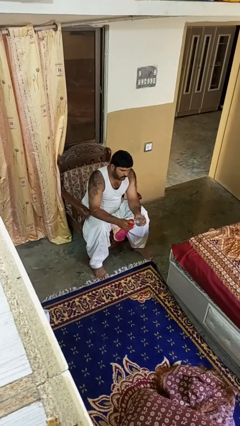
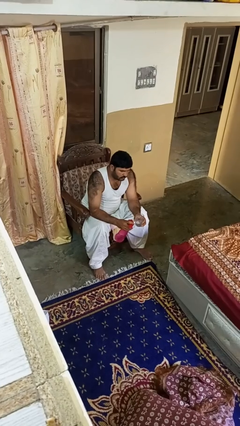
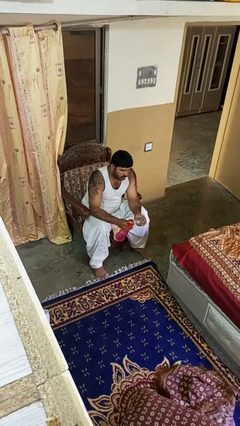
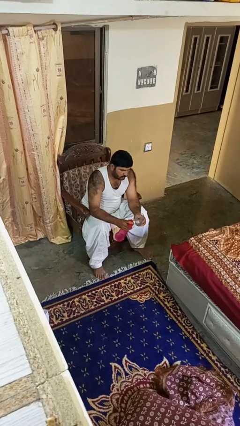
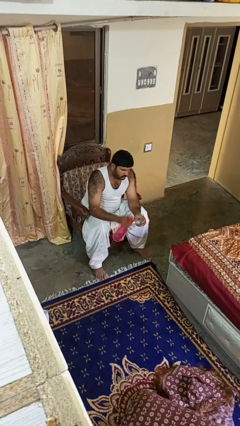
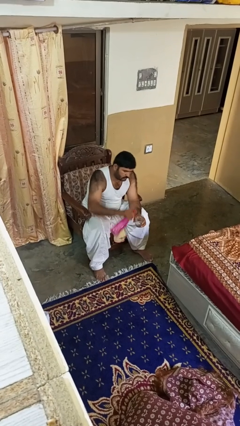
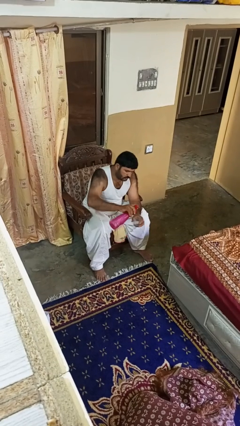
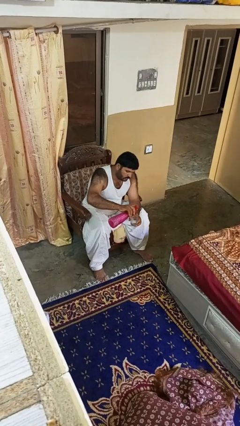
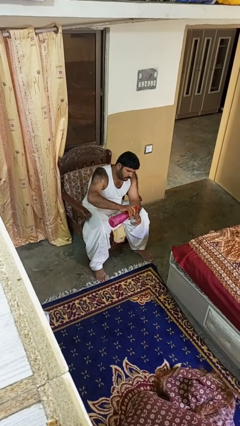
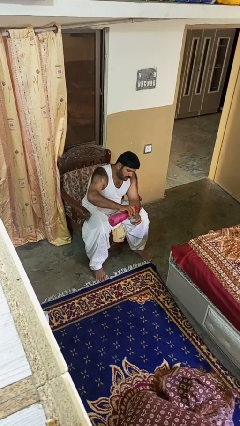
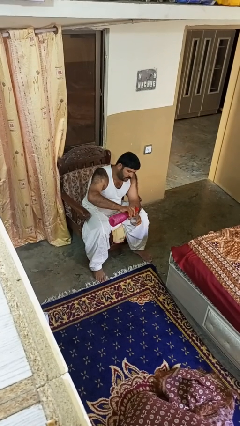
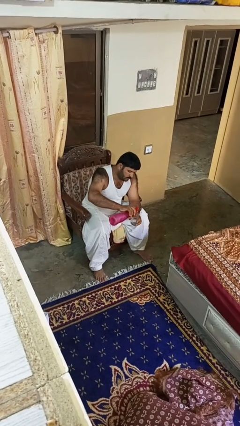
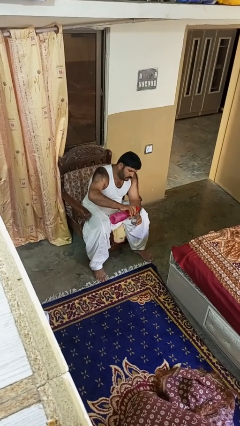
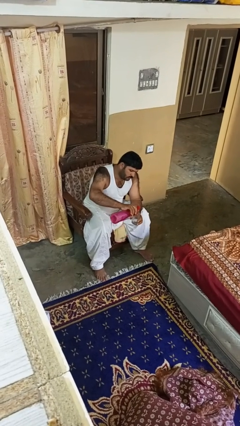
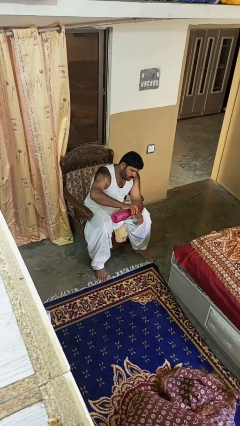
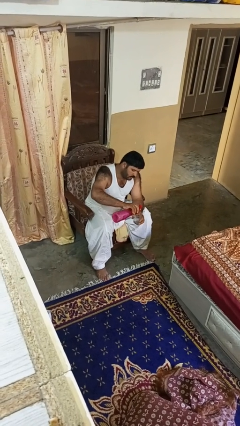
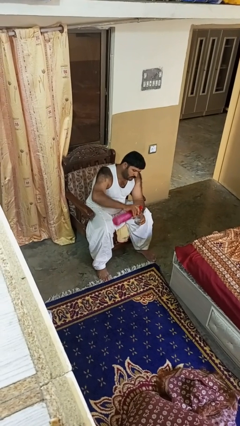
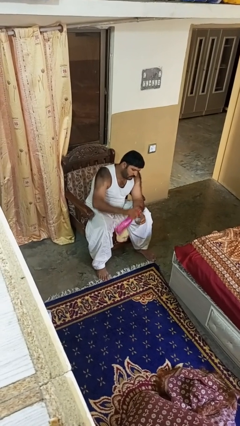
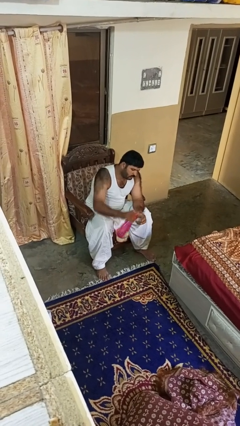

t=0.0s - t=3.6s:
person pours liquid into cup

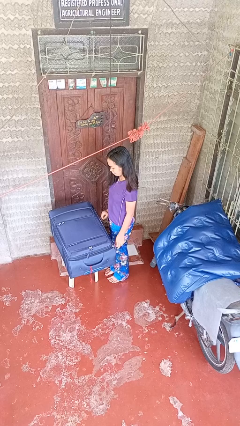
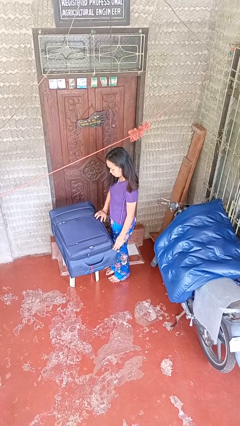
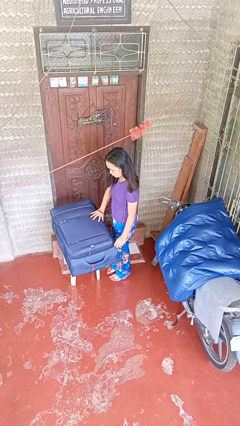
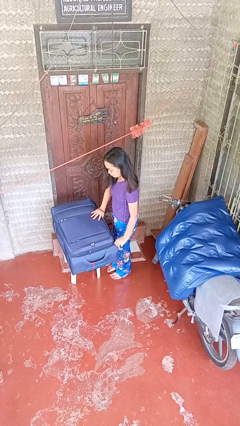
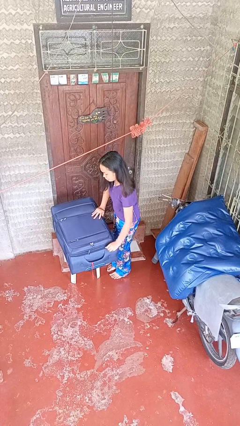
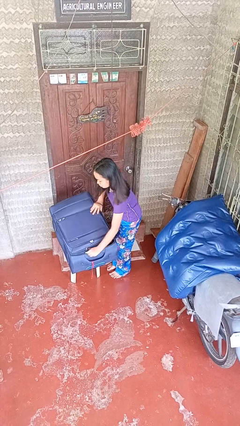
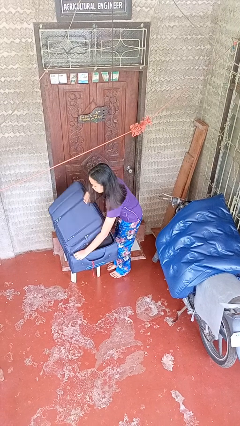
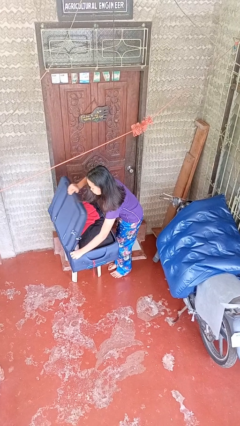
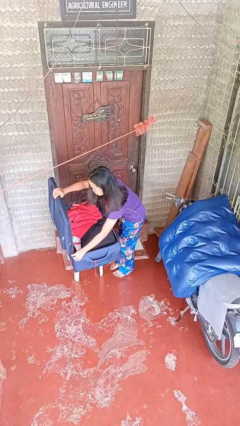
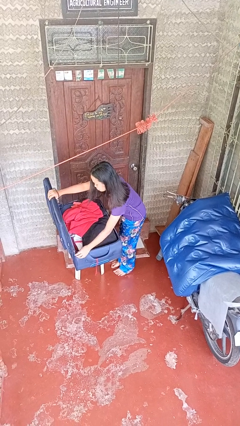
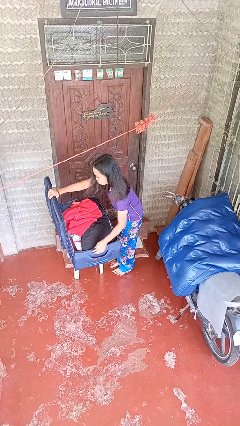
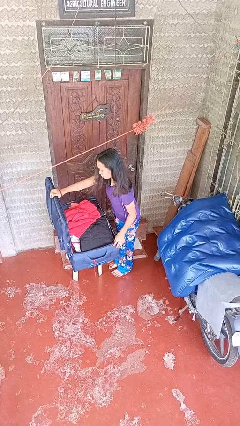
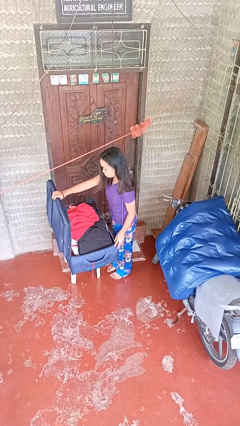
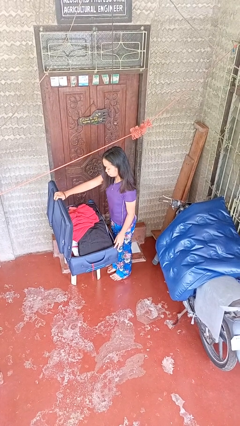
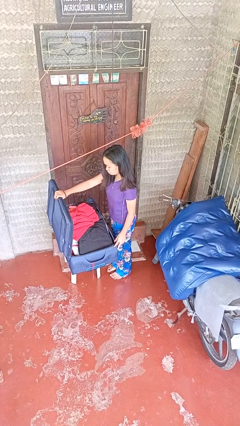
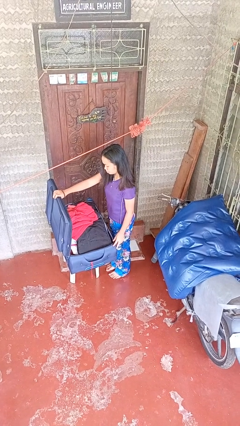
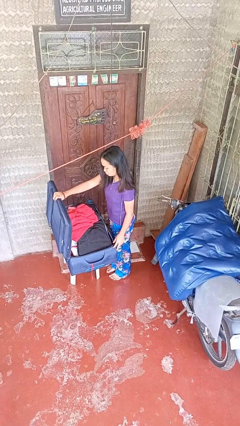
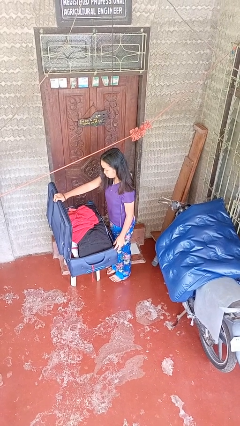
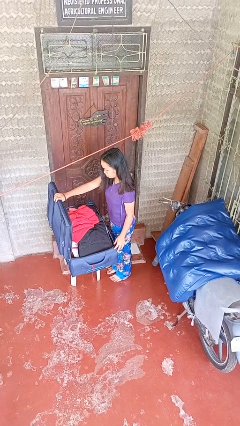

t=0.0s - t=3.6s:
person opens suitcase

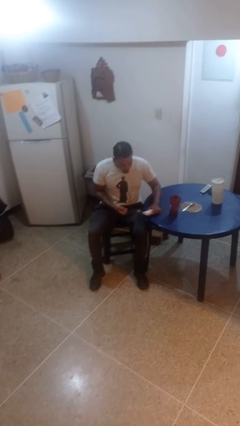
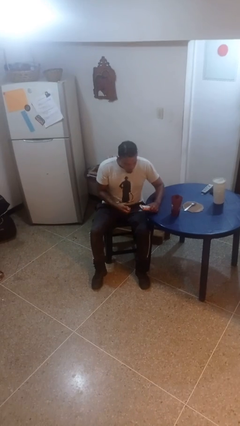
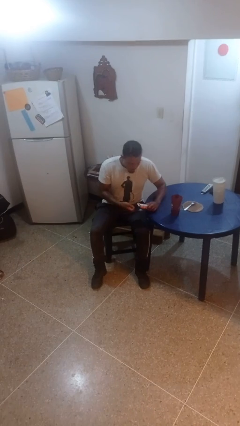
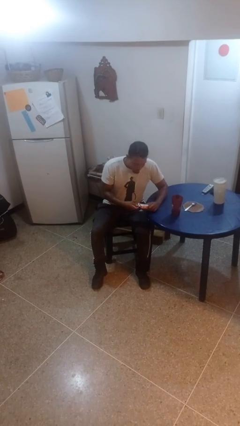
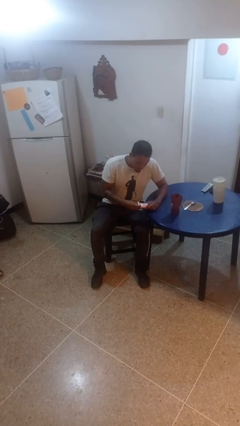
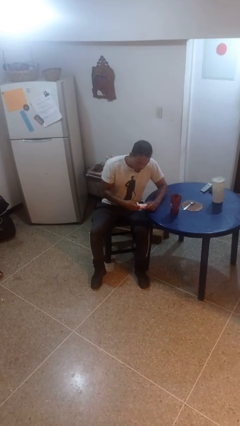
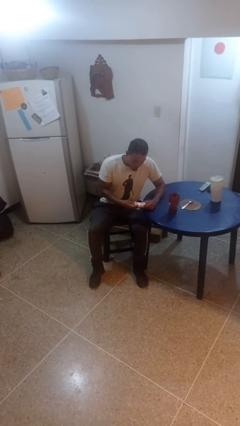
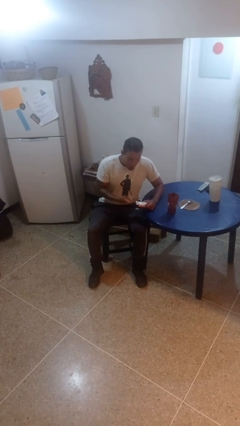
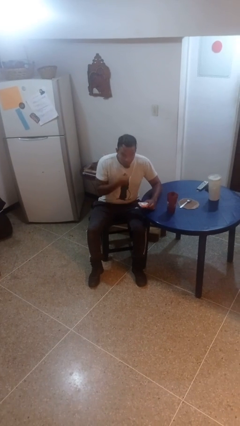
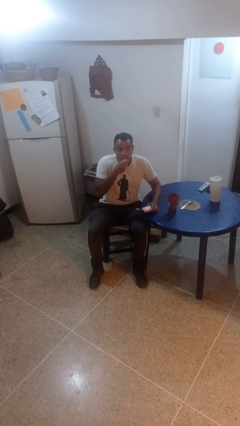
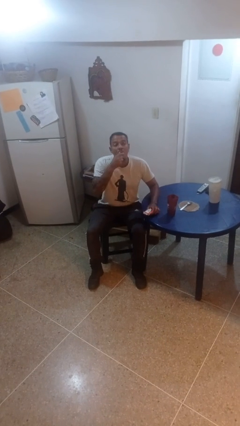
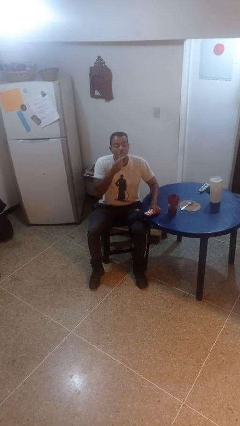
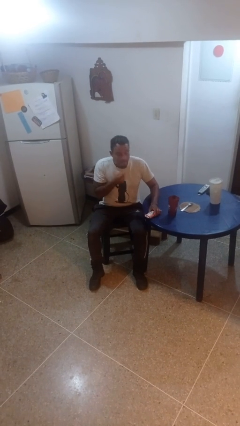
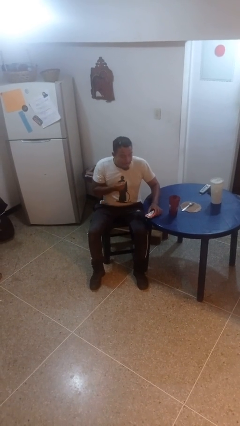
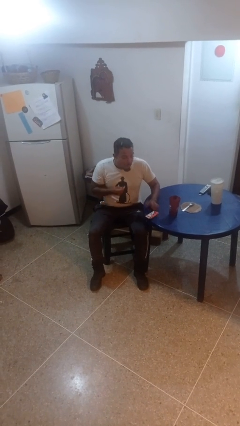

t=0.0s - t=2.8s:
person takes medicine pills

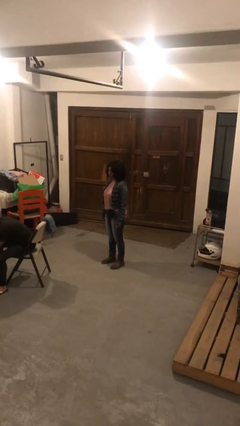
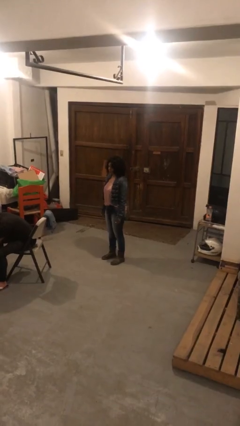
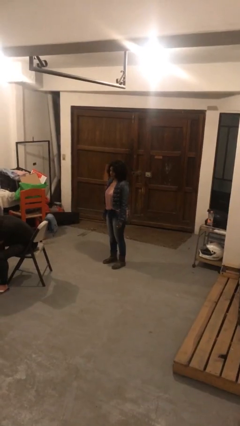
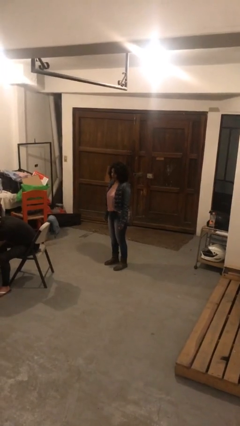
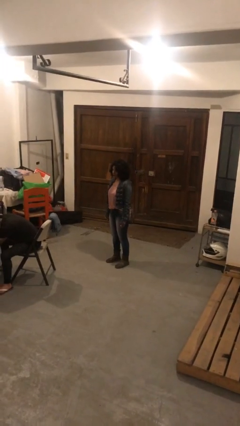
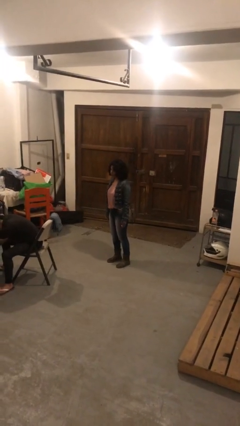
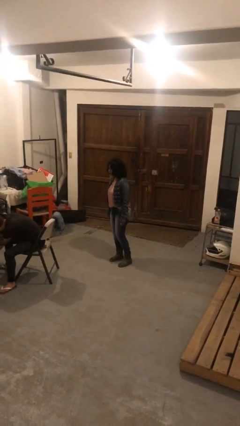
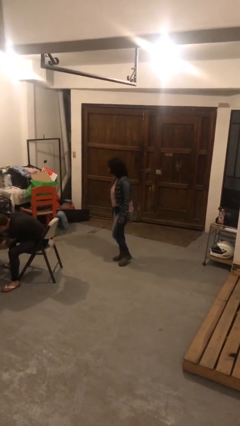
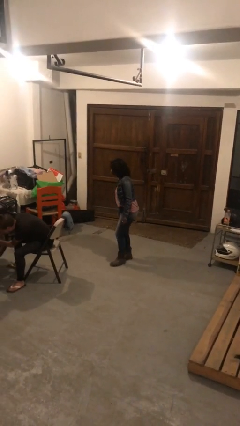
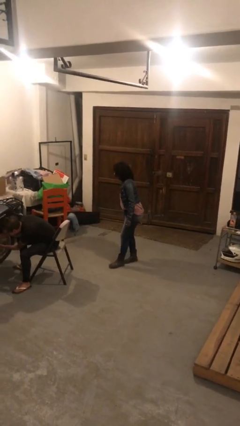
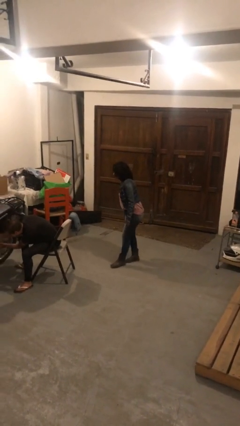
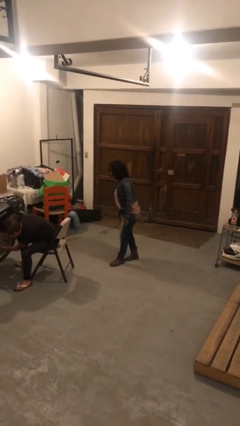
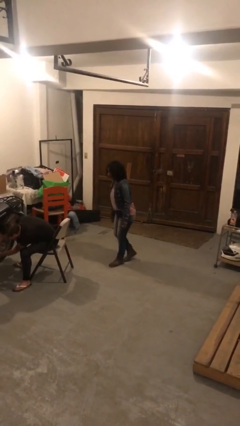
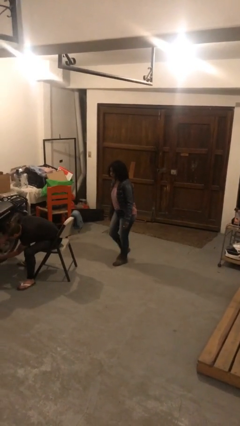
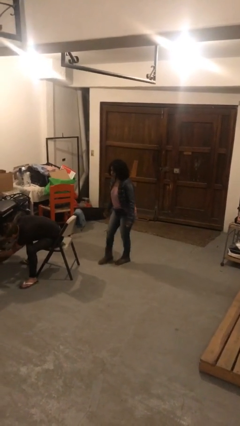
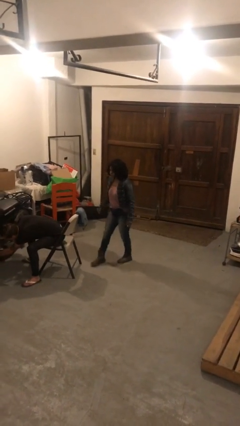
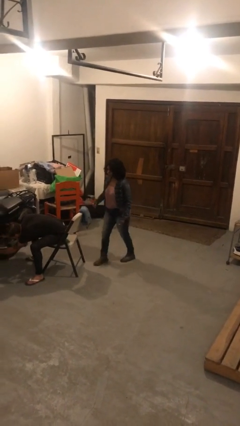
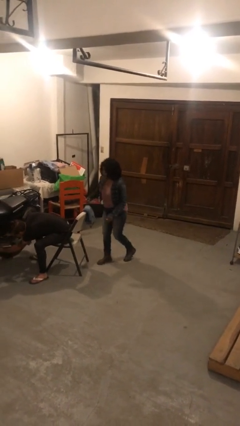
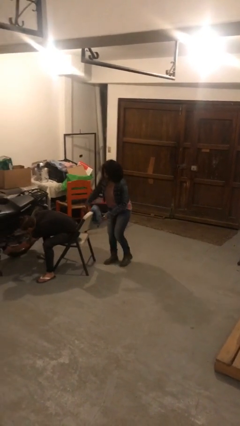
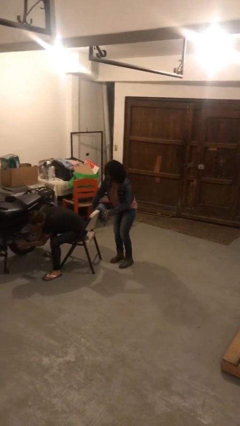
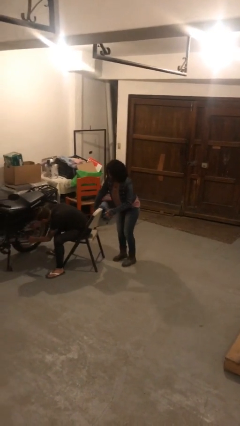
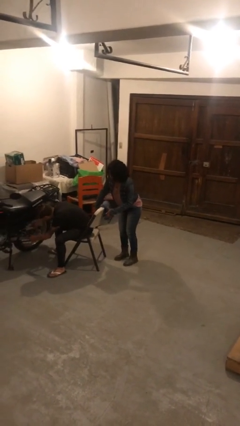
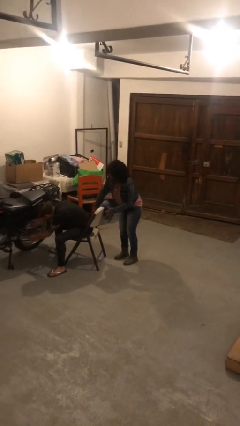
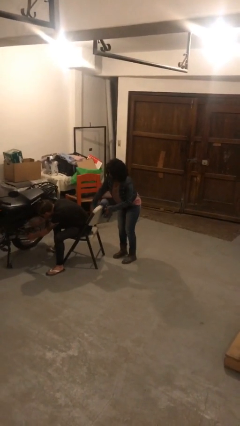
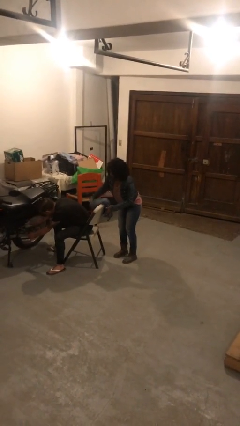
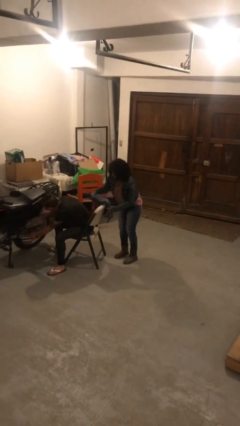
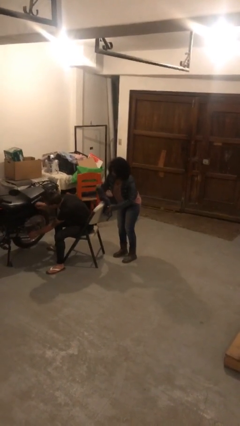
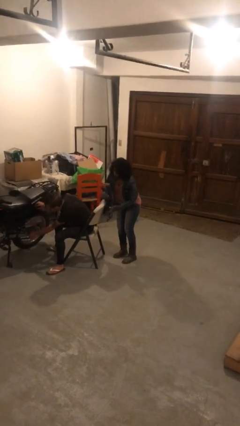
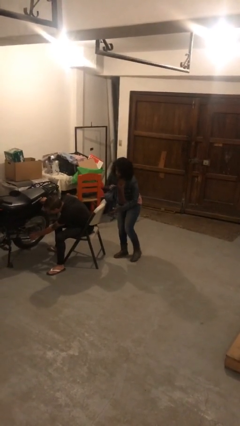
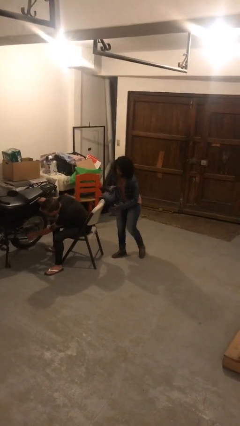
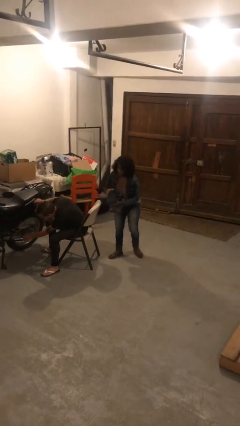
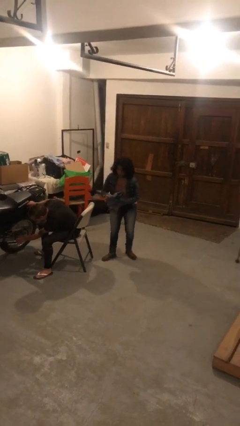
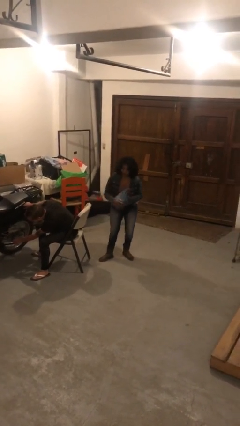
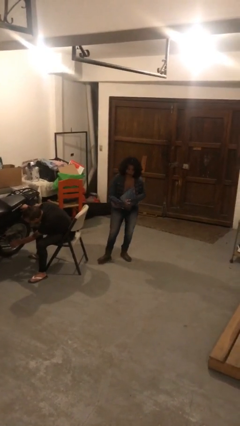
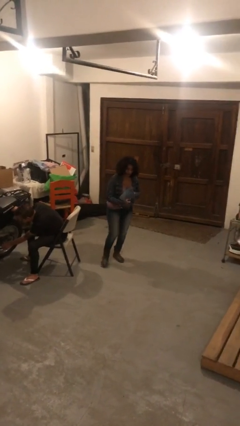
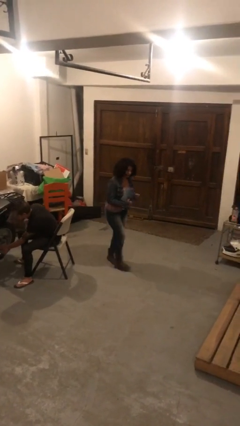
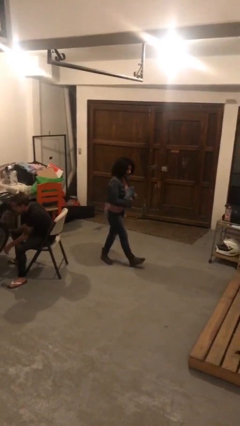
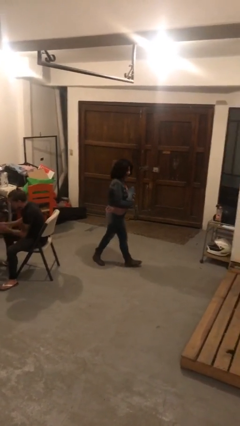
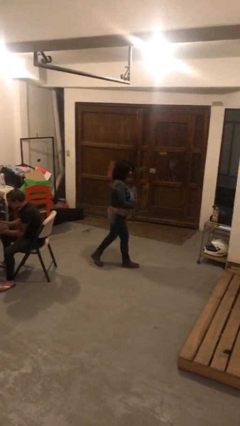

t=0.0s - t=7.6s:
person steals object from person
